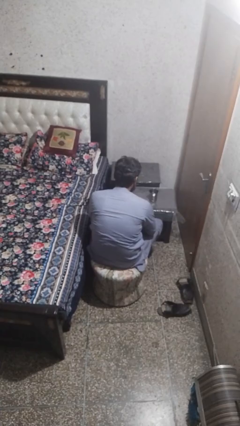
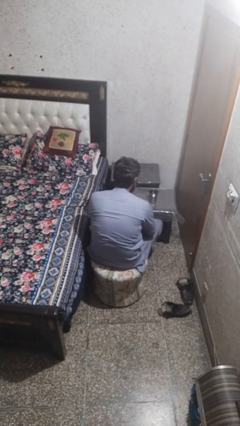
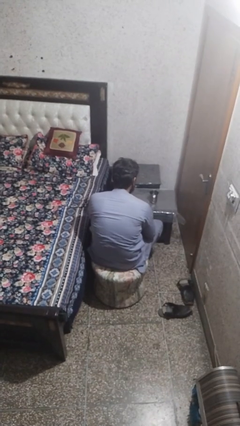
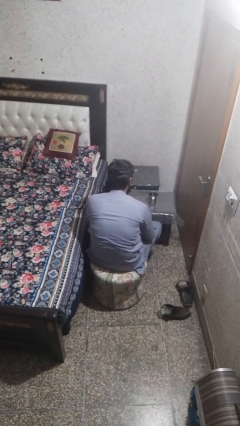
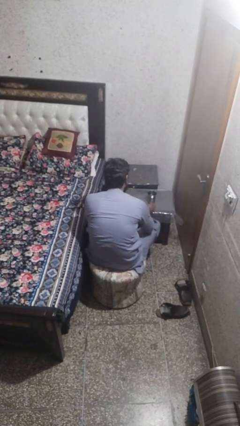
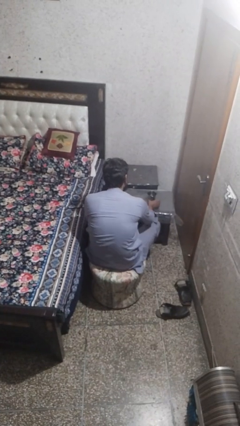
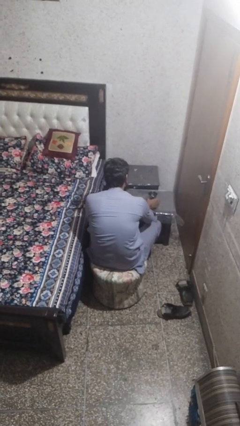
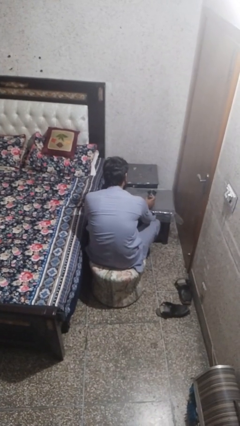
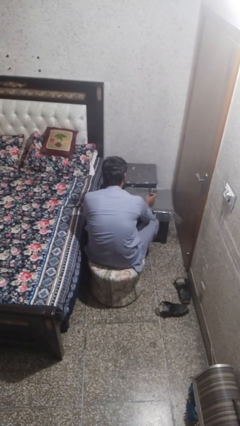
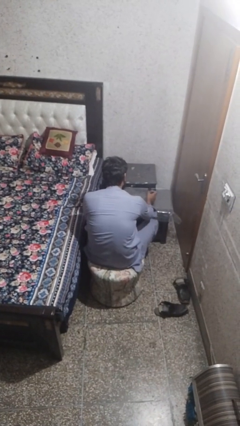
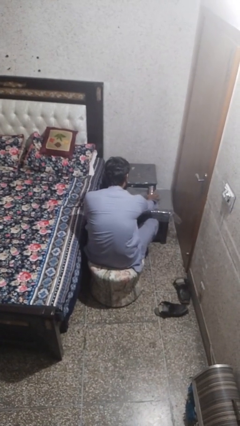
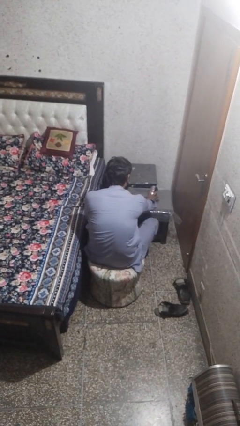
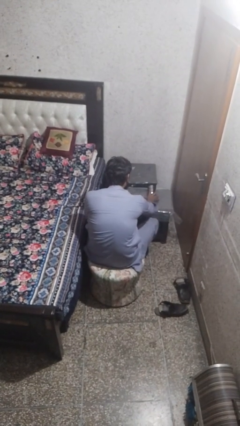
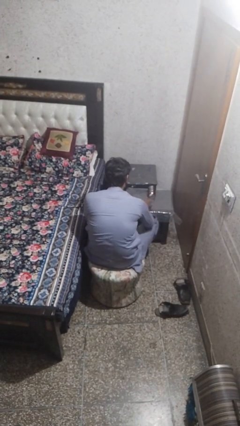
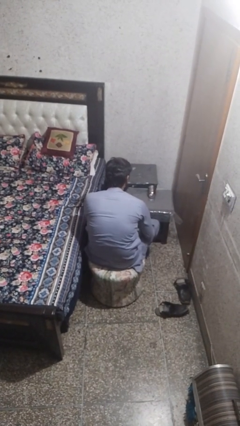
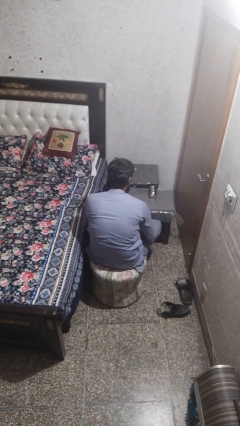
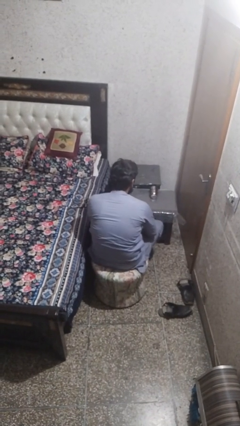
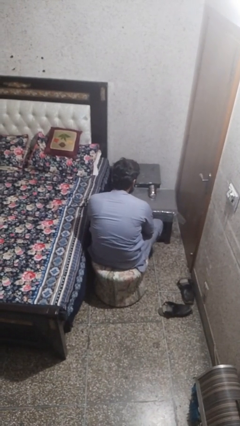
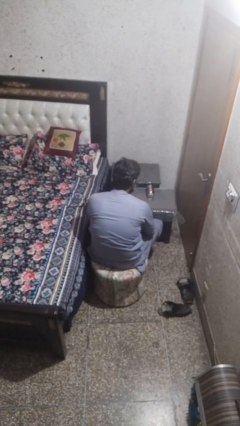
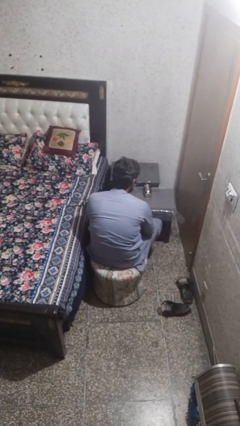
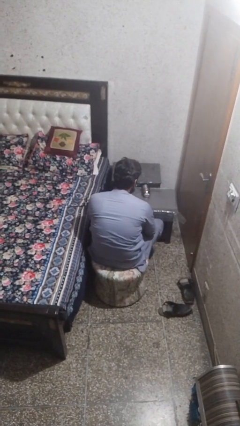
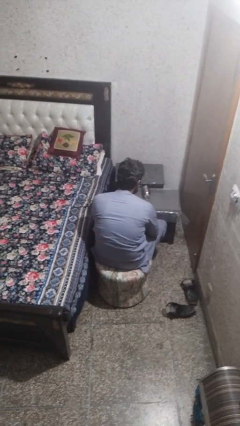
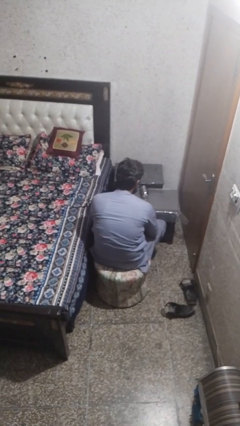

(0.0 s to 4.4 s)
person knocks over glass

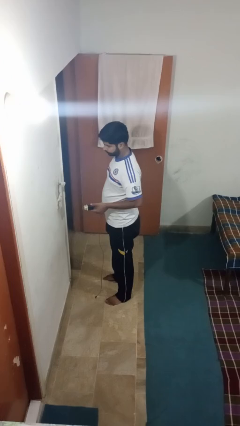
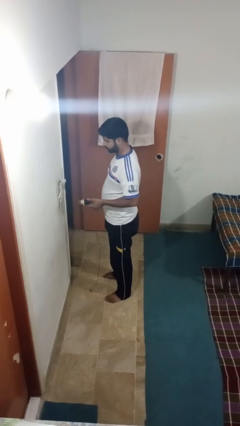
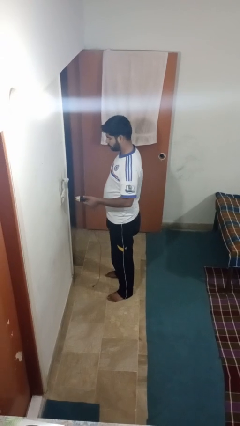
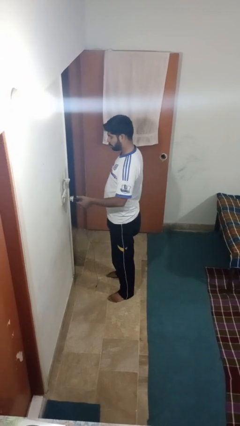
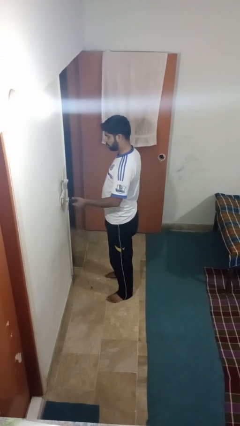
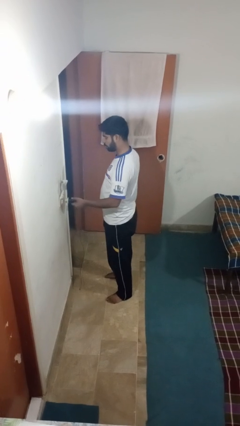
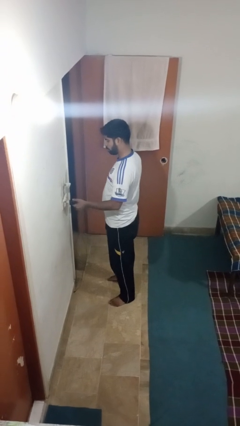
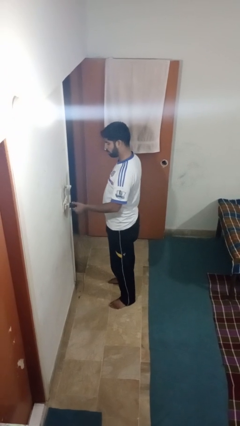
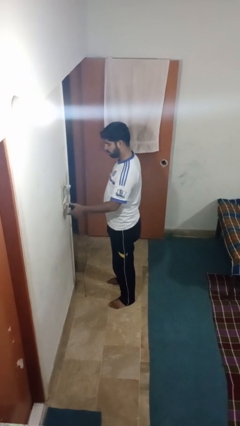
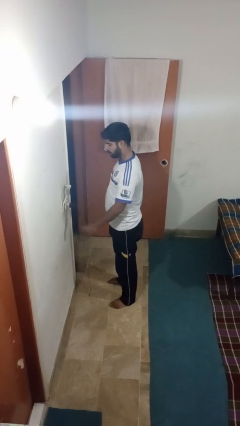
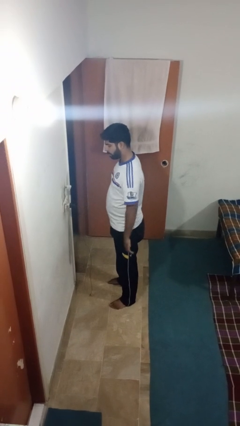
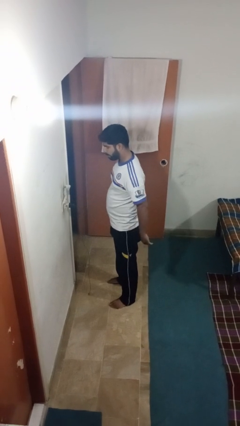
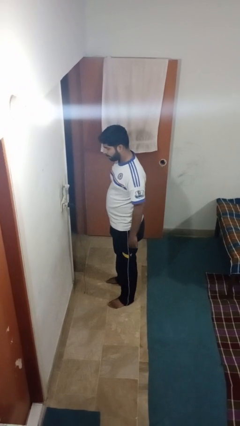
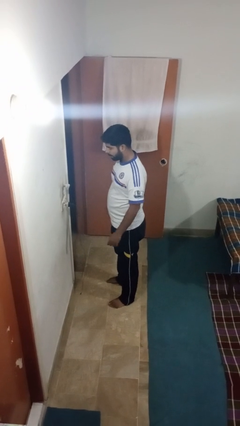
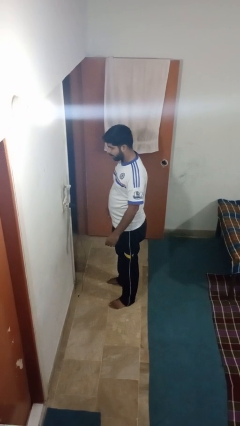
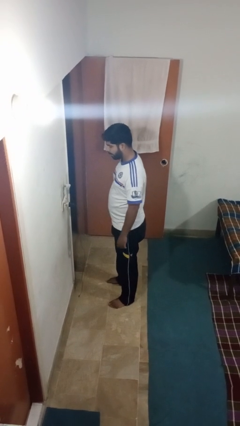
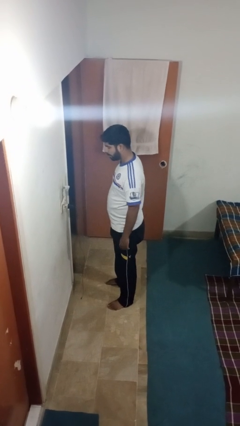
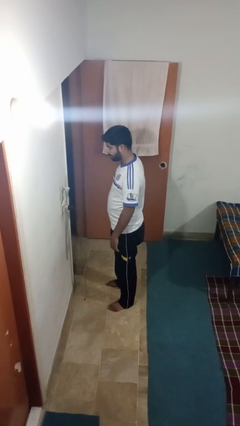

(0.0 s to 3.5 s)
person plugs into electrical socket

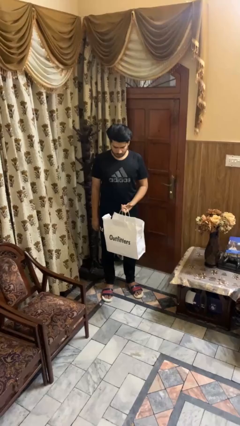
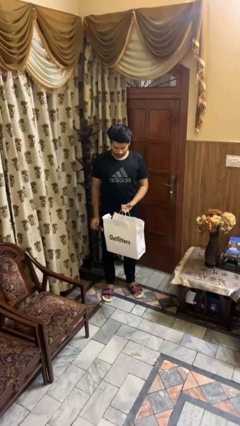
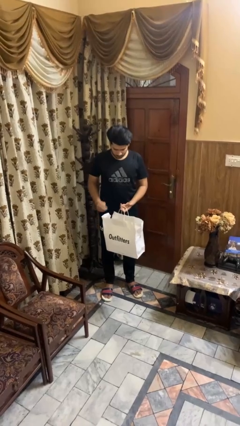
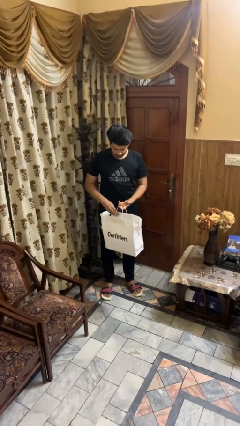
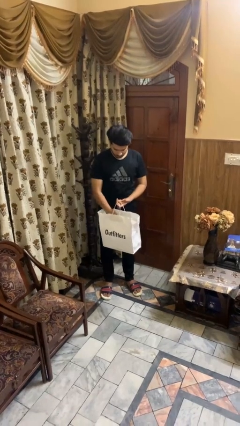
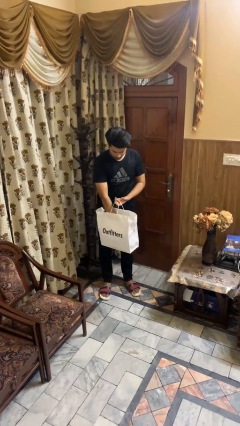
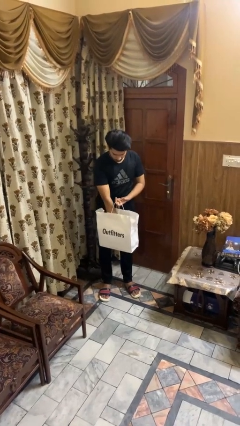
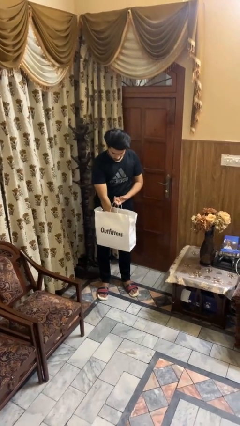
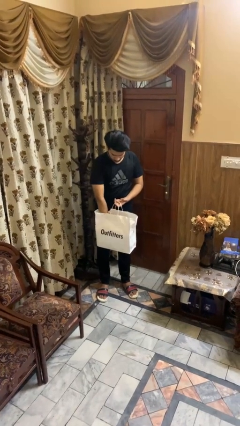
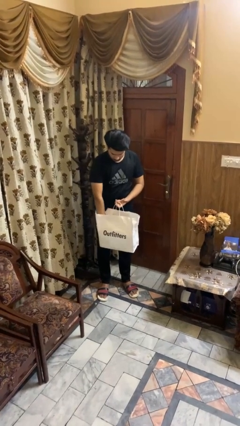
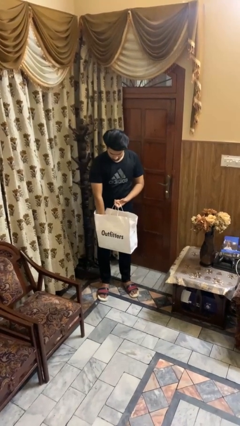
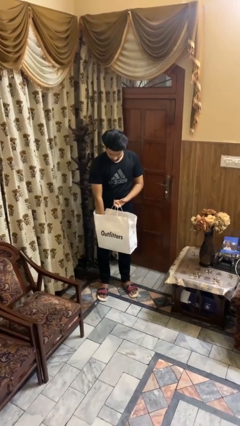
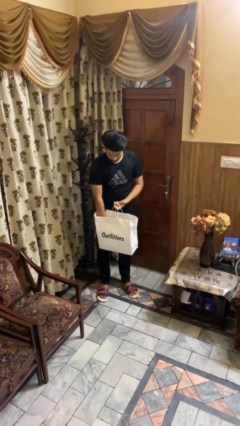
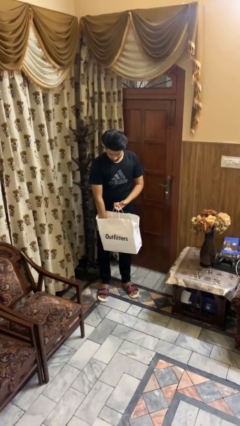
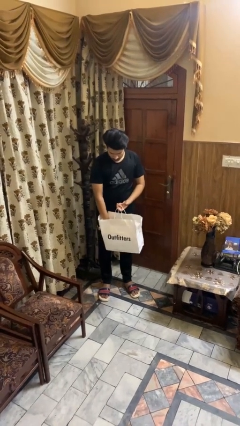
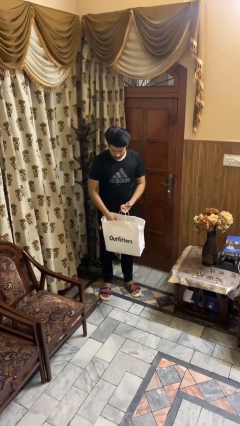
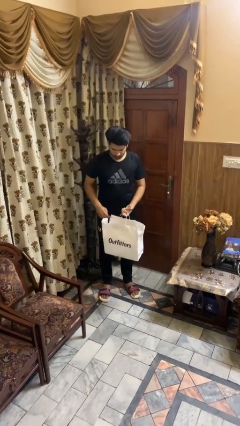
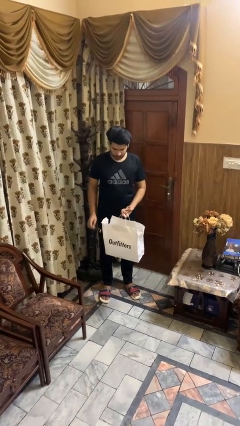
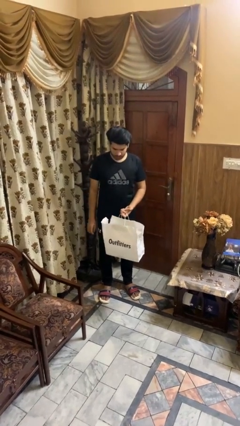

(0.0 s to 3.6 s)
person searches in bag

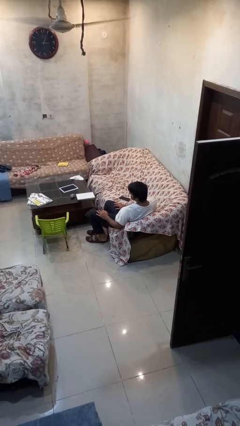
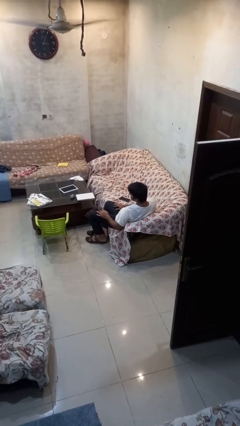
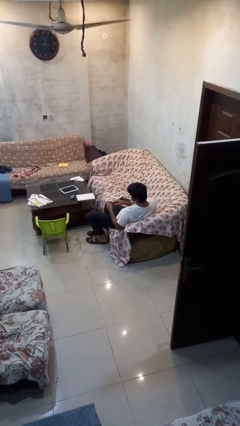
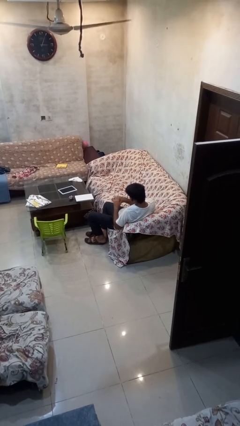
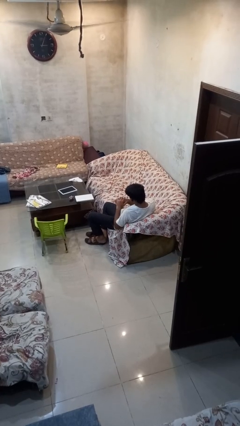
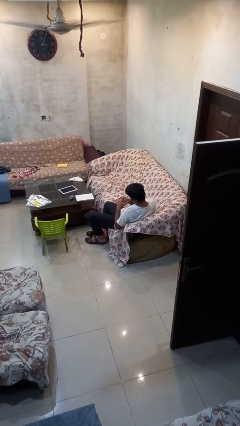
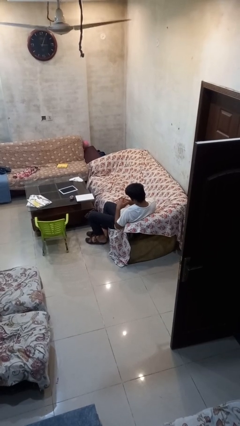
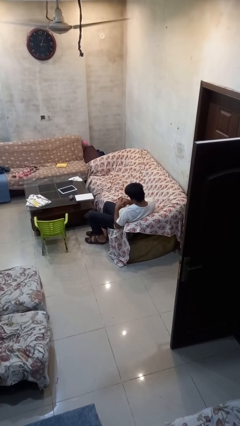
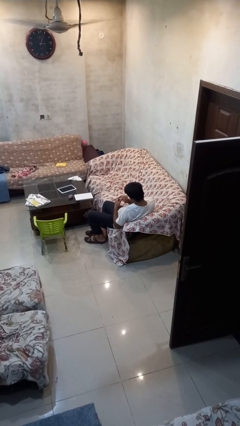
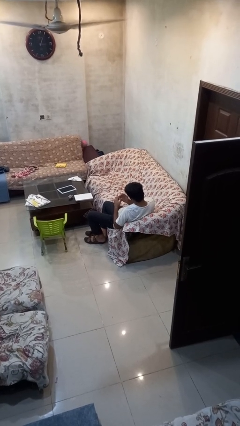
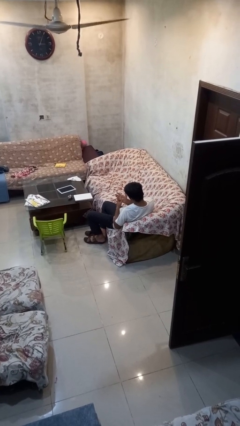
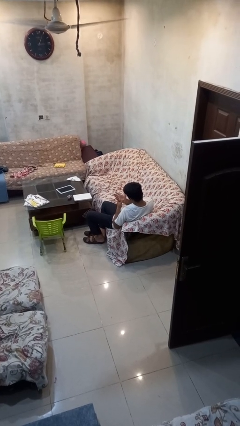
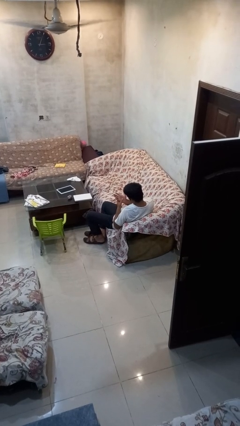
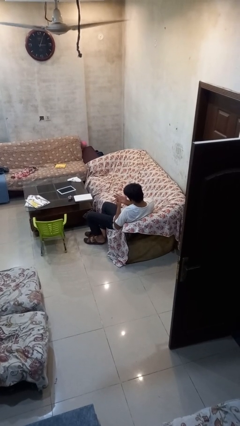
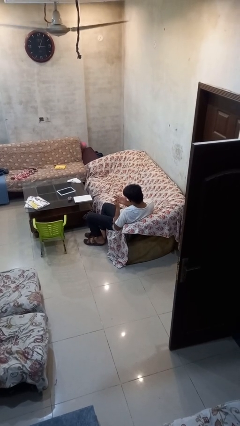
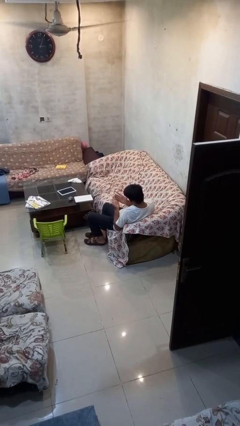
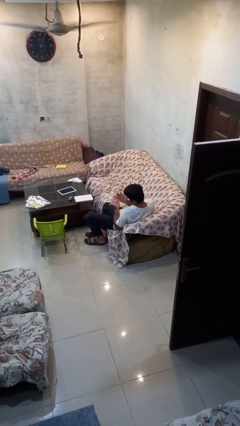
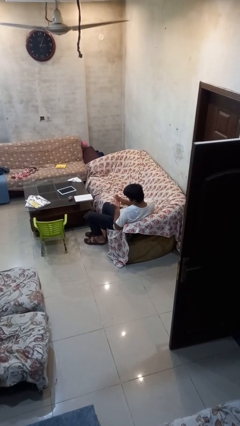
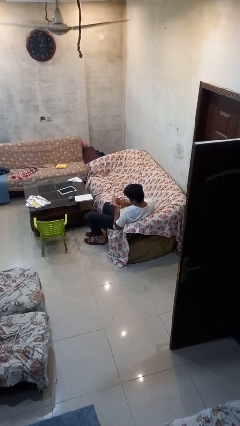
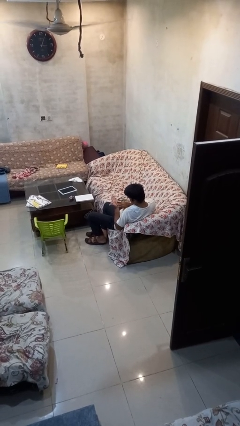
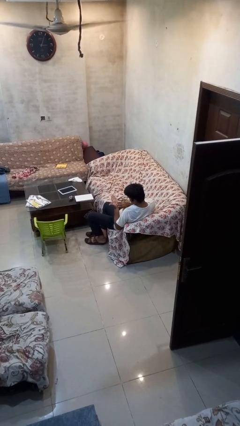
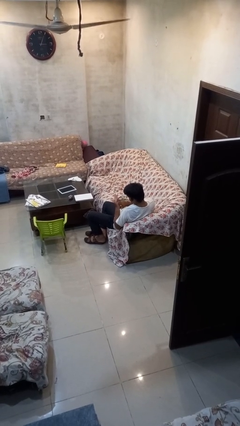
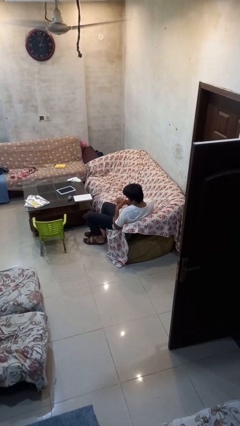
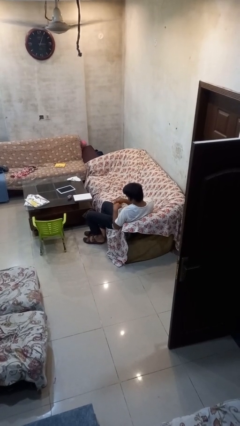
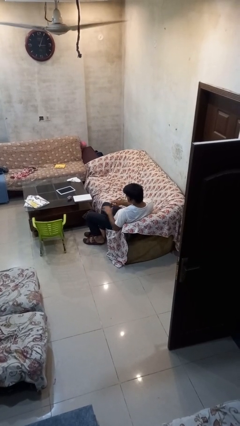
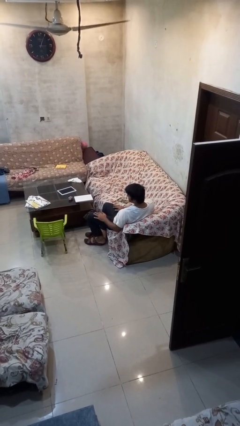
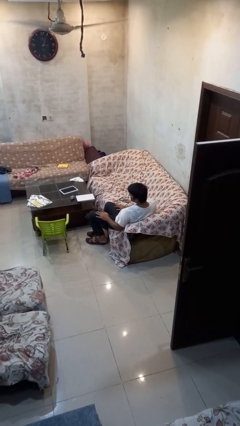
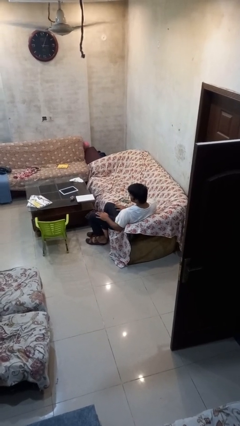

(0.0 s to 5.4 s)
person looks at hands in lap

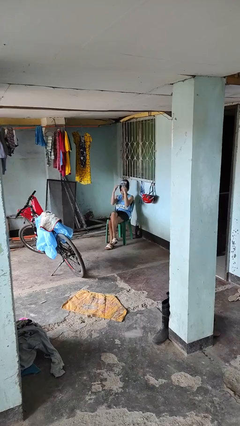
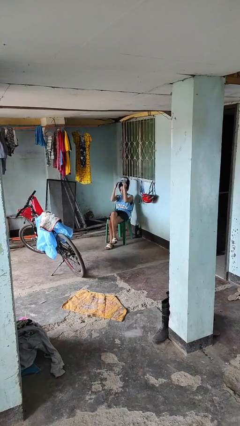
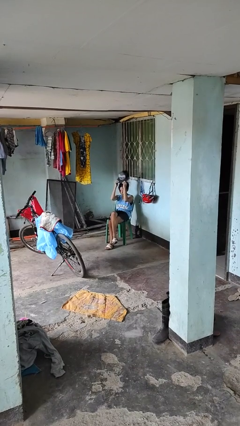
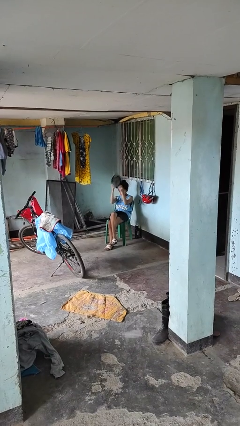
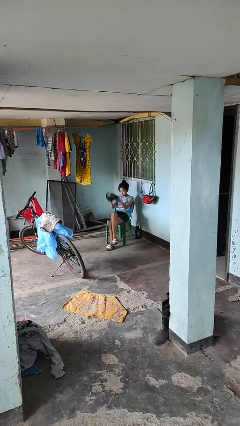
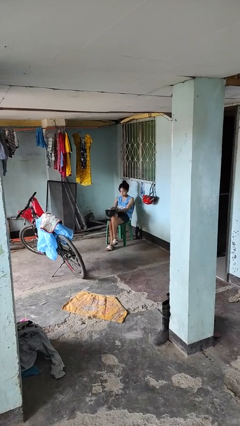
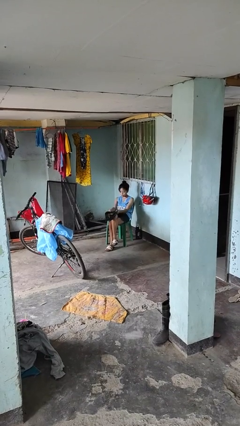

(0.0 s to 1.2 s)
person takes off hat
